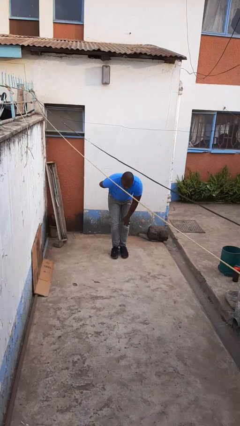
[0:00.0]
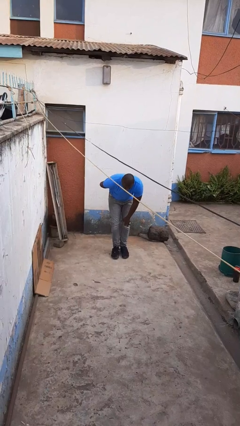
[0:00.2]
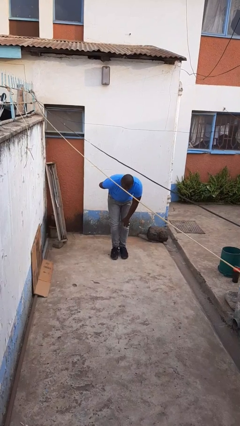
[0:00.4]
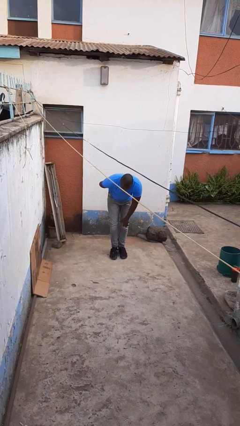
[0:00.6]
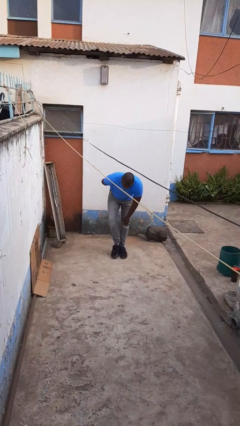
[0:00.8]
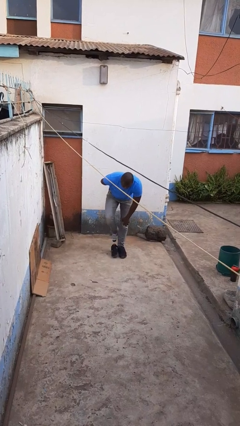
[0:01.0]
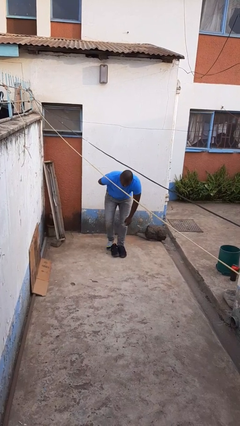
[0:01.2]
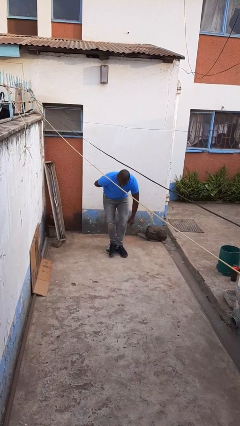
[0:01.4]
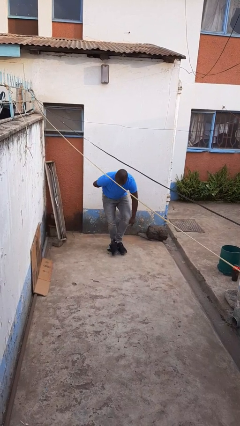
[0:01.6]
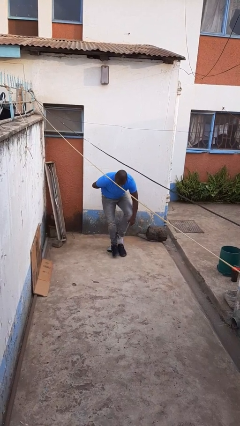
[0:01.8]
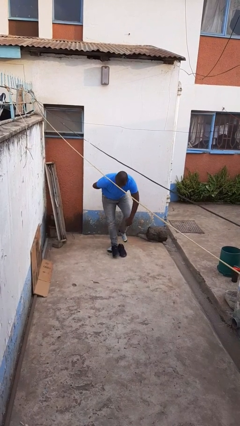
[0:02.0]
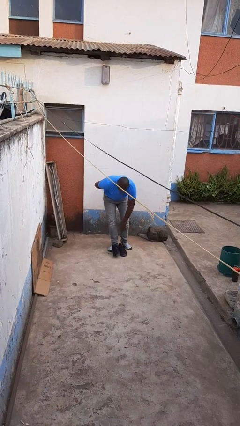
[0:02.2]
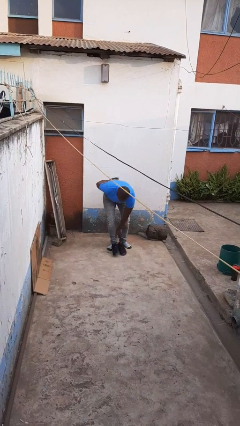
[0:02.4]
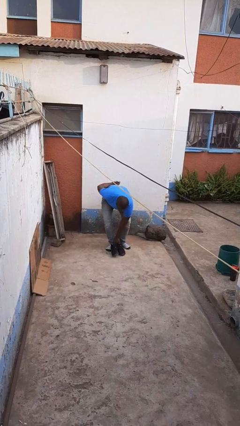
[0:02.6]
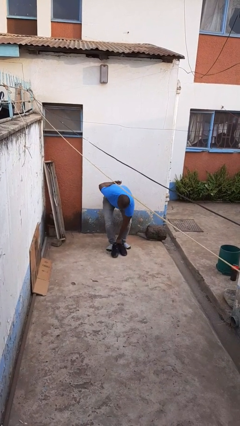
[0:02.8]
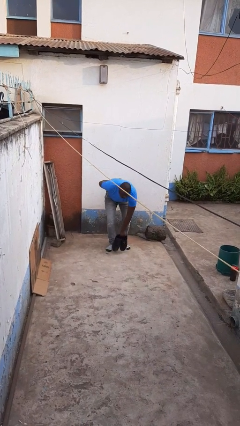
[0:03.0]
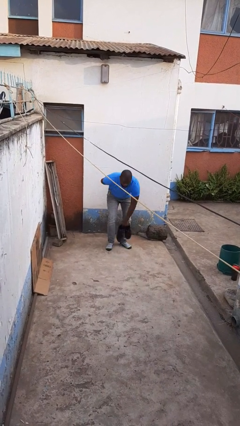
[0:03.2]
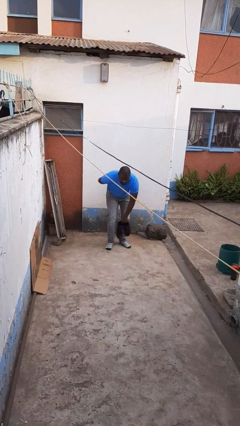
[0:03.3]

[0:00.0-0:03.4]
person takes off shoes

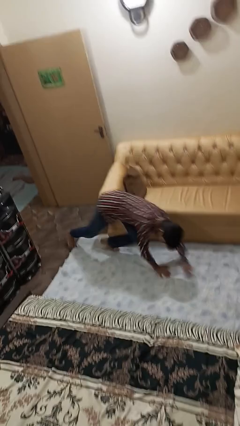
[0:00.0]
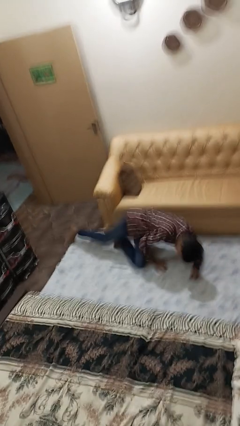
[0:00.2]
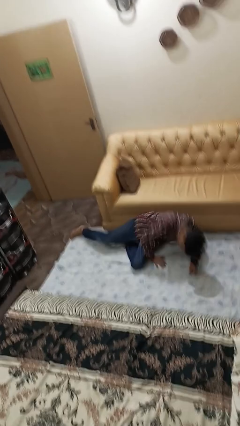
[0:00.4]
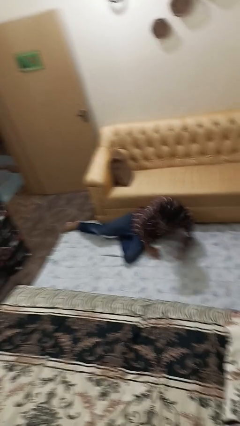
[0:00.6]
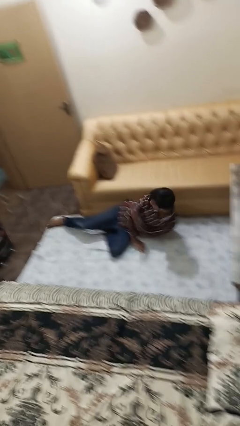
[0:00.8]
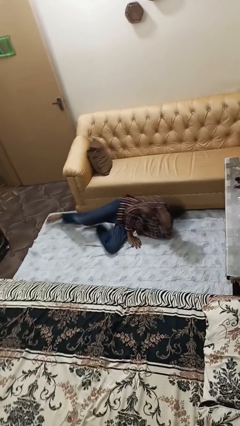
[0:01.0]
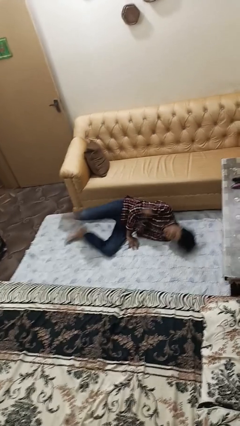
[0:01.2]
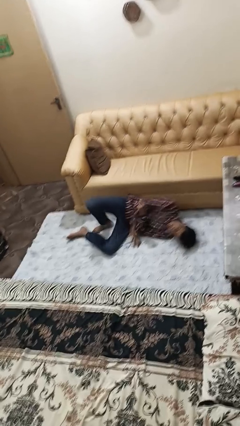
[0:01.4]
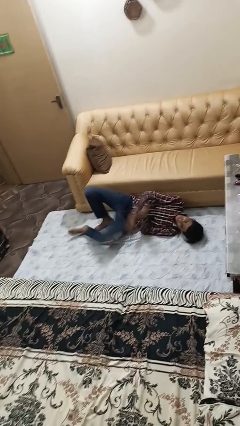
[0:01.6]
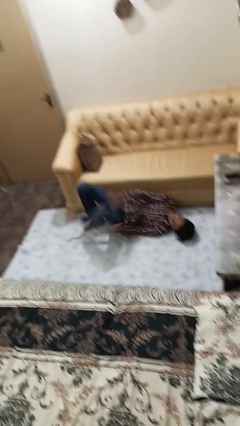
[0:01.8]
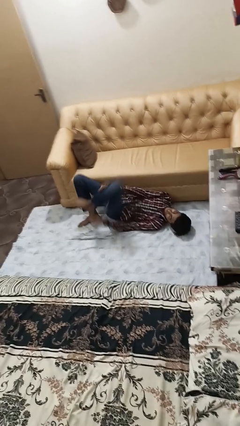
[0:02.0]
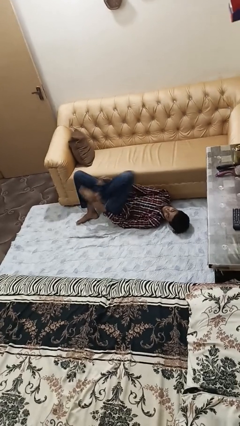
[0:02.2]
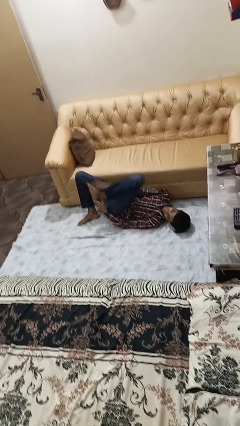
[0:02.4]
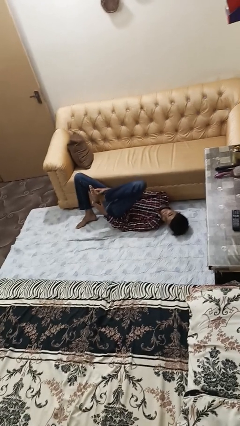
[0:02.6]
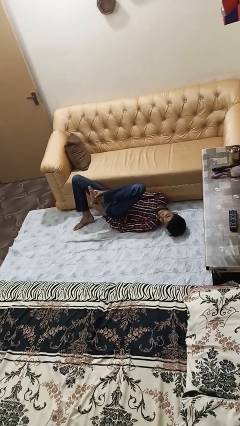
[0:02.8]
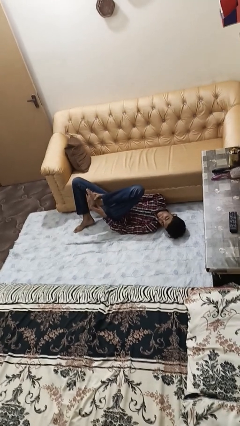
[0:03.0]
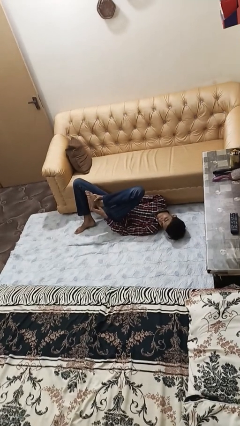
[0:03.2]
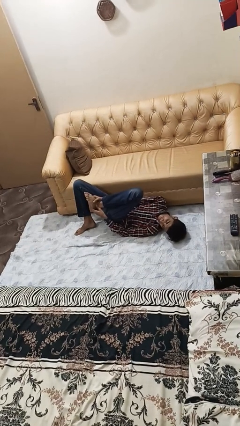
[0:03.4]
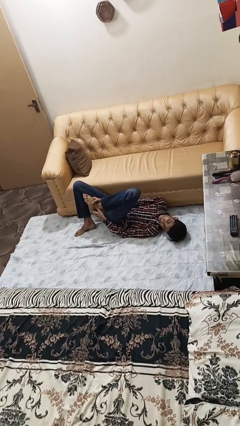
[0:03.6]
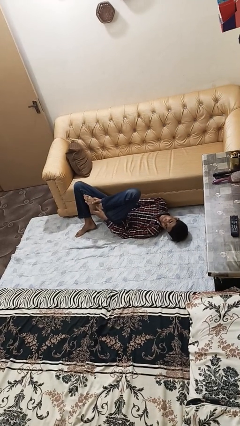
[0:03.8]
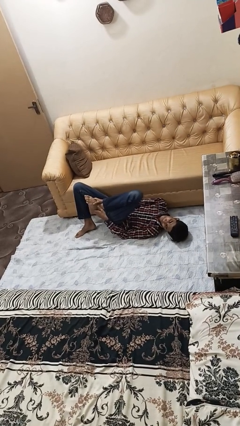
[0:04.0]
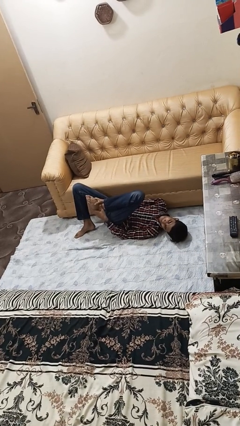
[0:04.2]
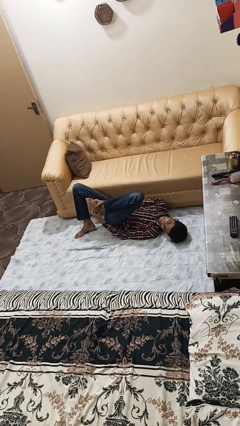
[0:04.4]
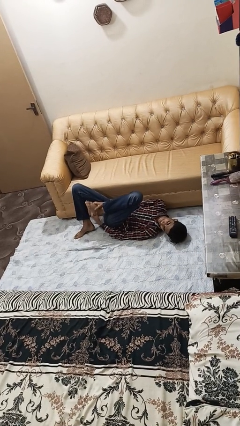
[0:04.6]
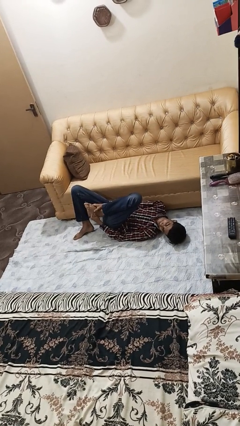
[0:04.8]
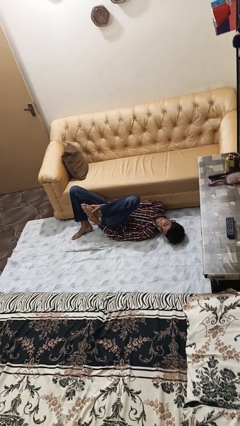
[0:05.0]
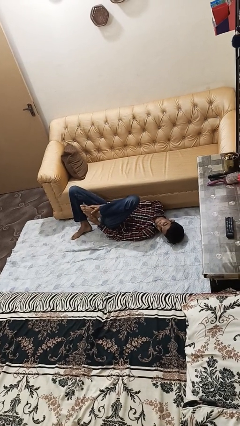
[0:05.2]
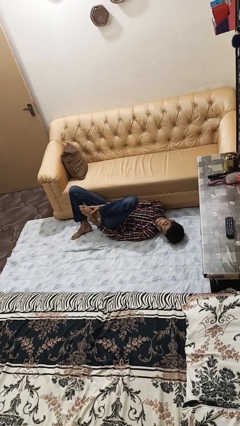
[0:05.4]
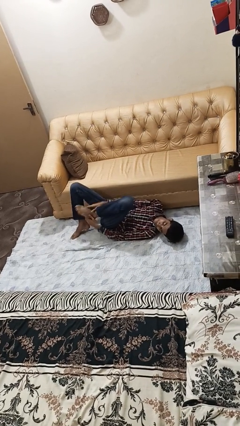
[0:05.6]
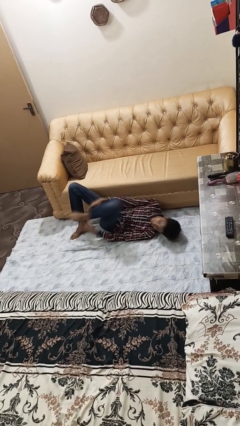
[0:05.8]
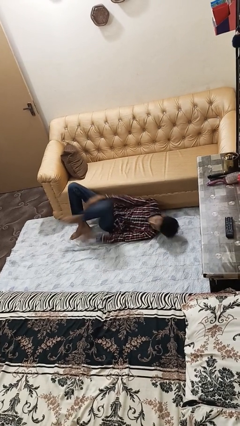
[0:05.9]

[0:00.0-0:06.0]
person lies down on floor

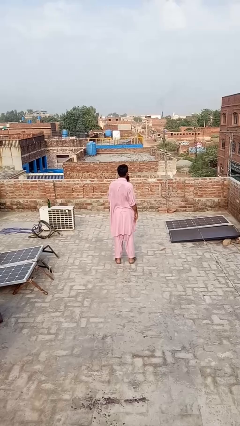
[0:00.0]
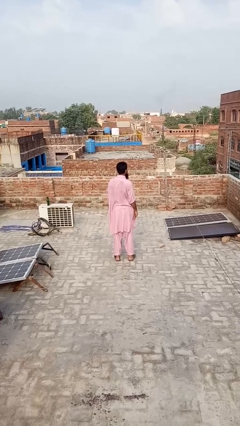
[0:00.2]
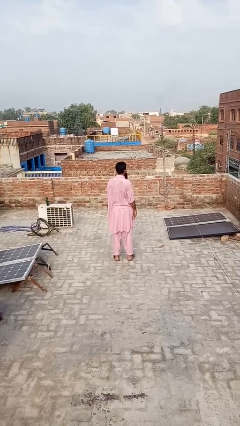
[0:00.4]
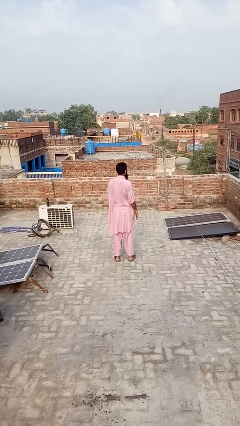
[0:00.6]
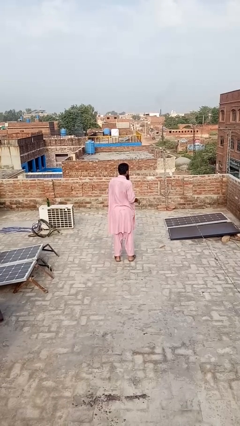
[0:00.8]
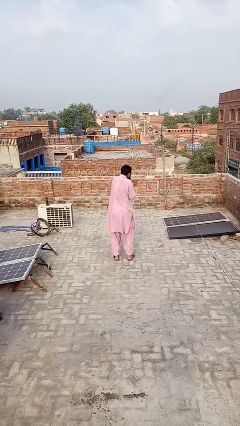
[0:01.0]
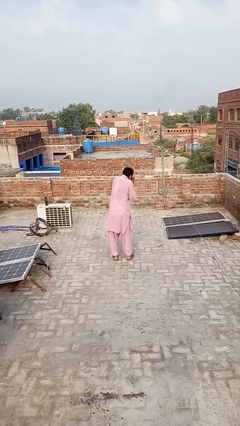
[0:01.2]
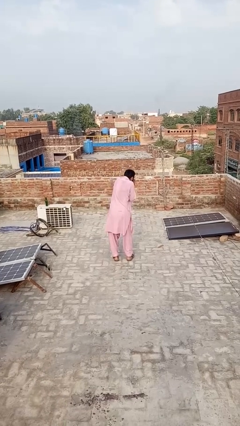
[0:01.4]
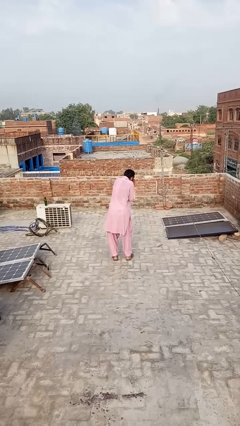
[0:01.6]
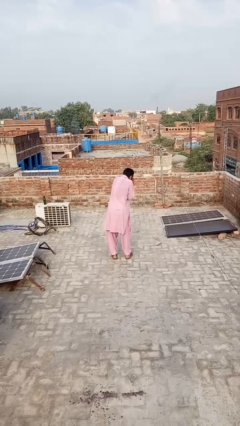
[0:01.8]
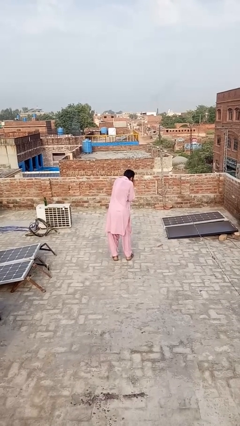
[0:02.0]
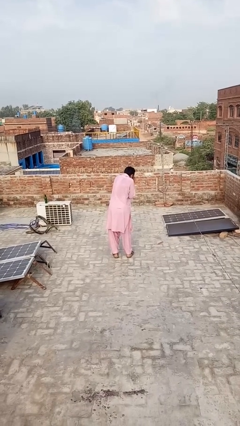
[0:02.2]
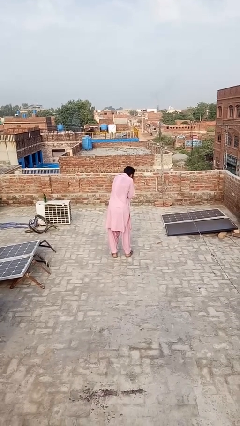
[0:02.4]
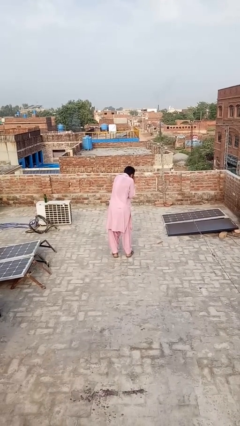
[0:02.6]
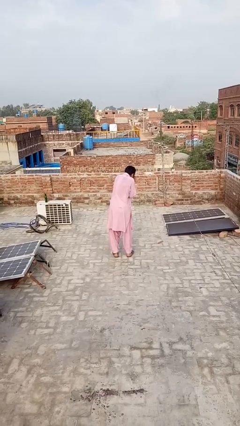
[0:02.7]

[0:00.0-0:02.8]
person blows into hands

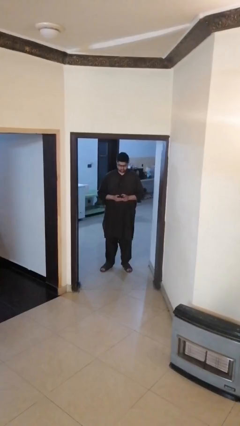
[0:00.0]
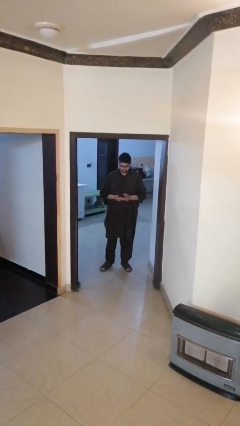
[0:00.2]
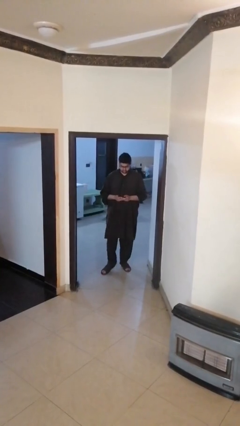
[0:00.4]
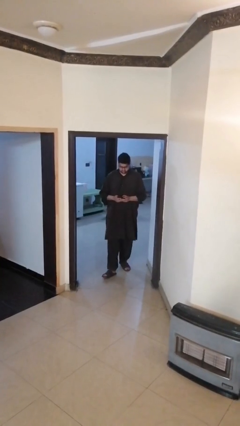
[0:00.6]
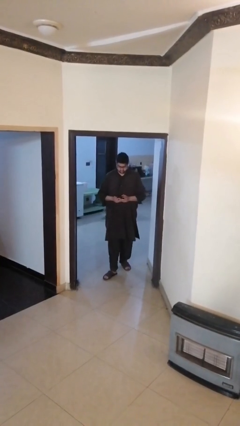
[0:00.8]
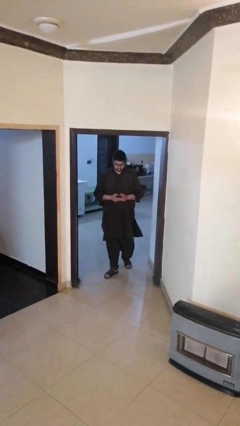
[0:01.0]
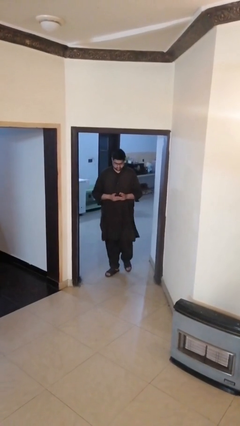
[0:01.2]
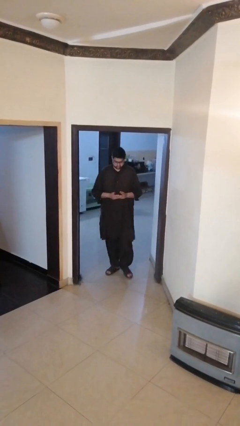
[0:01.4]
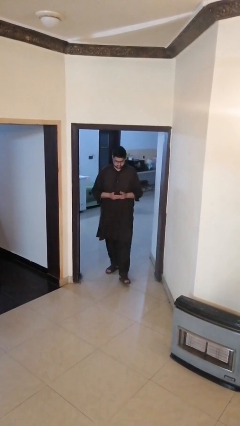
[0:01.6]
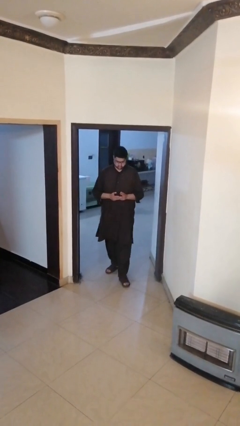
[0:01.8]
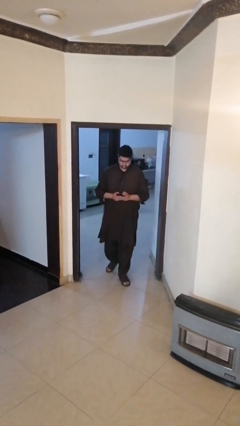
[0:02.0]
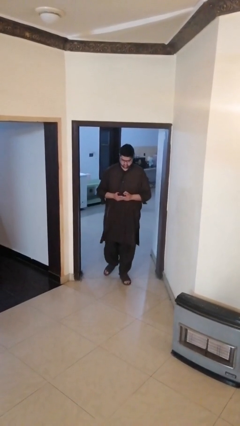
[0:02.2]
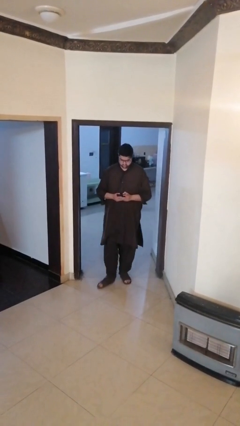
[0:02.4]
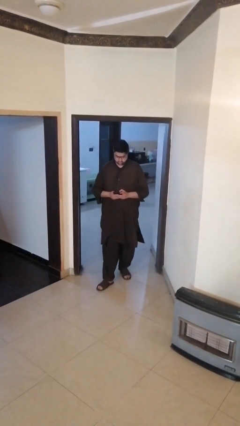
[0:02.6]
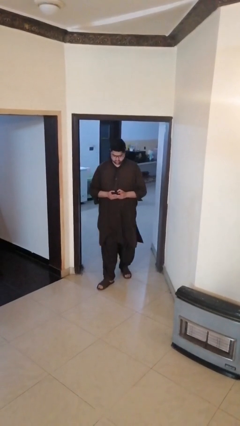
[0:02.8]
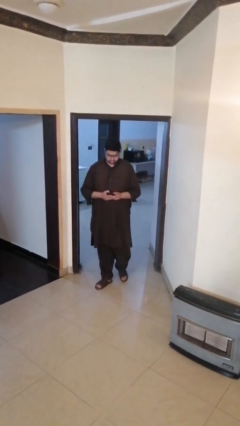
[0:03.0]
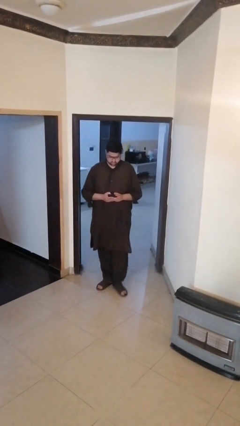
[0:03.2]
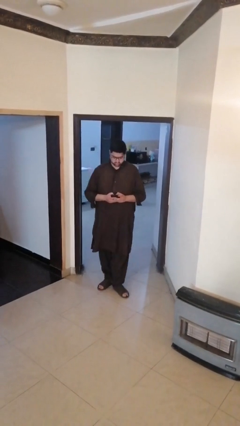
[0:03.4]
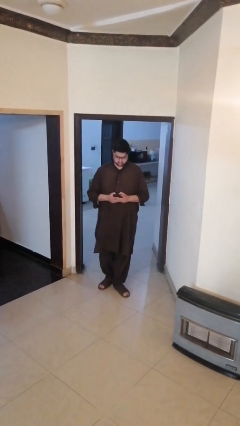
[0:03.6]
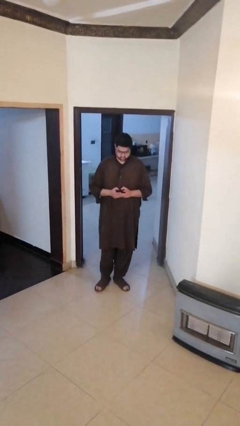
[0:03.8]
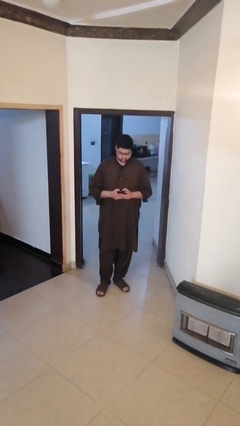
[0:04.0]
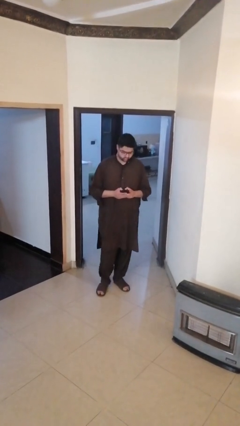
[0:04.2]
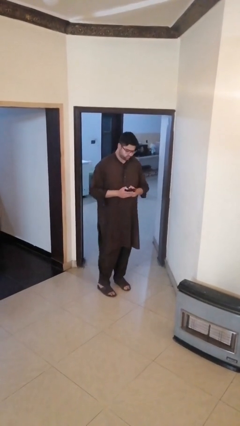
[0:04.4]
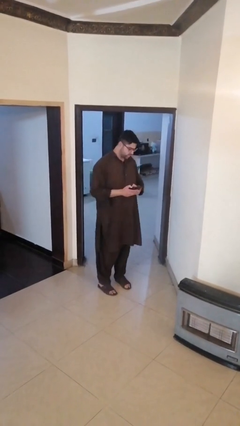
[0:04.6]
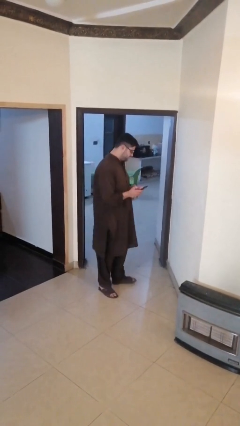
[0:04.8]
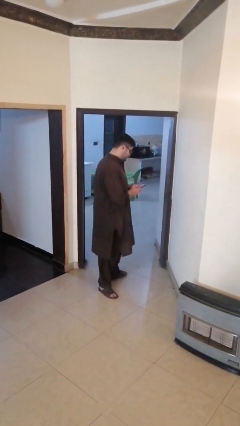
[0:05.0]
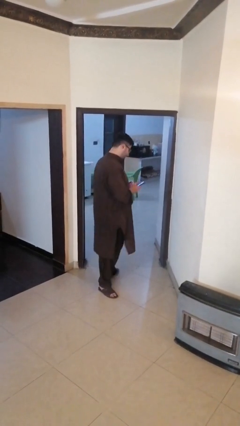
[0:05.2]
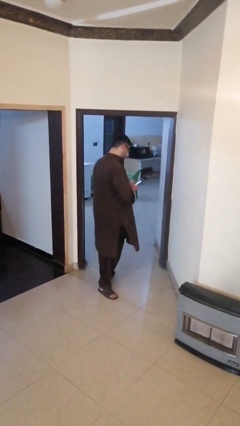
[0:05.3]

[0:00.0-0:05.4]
person enters scene through structure
